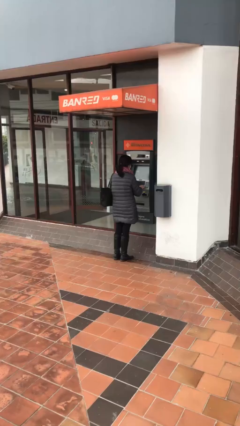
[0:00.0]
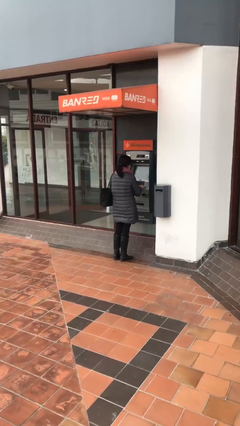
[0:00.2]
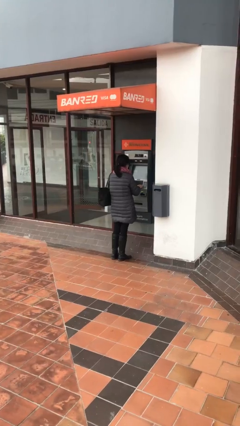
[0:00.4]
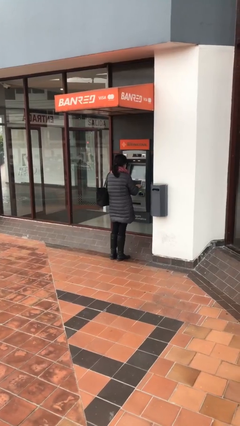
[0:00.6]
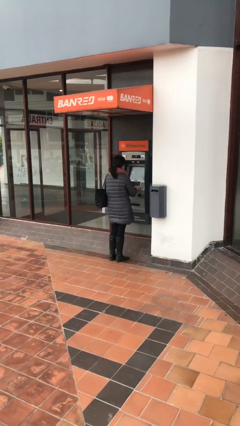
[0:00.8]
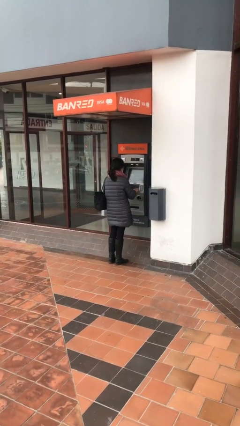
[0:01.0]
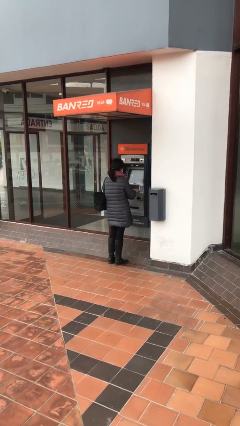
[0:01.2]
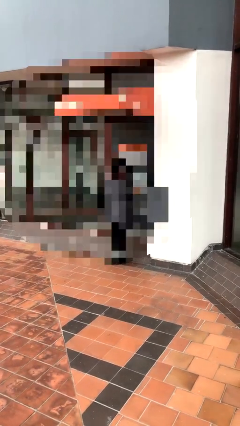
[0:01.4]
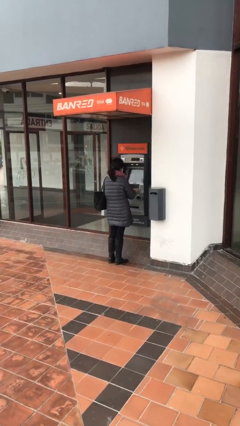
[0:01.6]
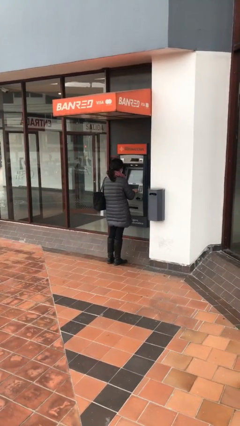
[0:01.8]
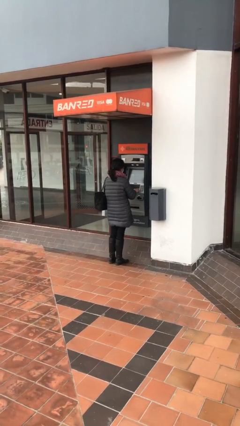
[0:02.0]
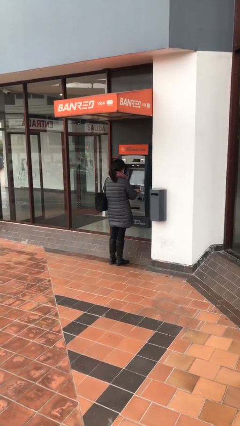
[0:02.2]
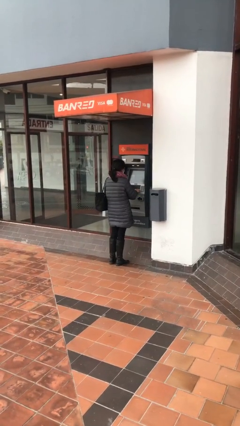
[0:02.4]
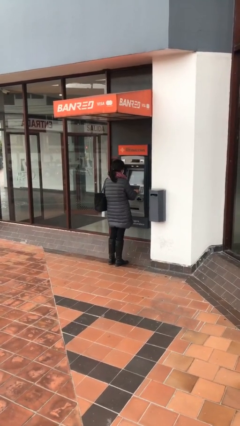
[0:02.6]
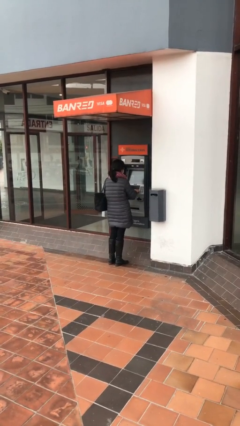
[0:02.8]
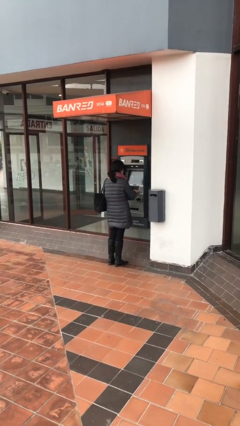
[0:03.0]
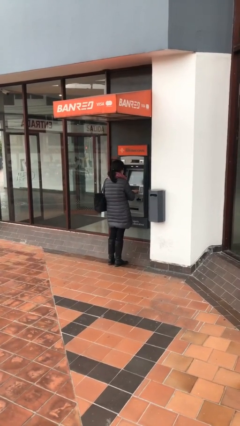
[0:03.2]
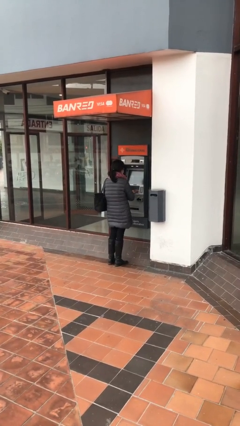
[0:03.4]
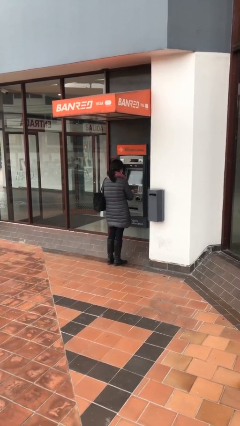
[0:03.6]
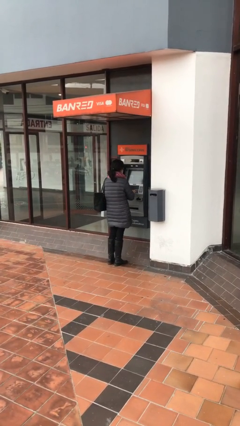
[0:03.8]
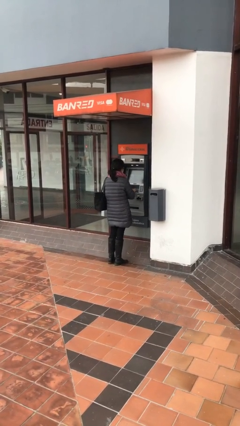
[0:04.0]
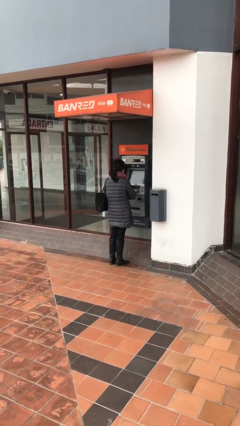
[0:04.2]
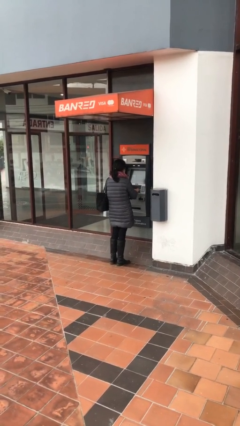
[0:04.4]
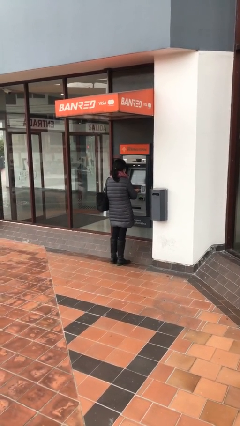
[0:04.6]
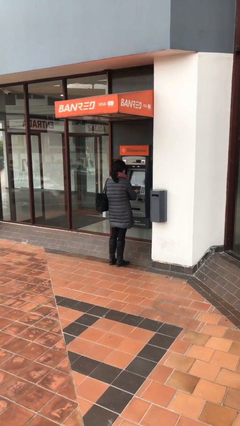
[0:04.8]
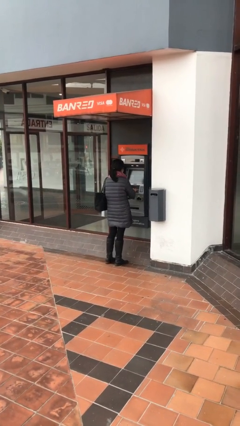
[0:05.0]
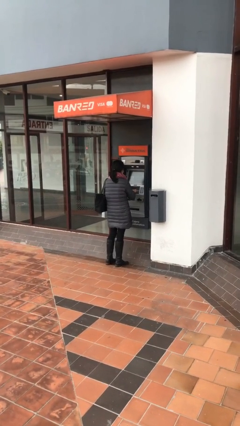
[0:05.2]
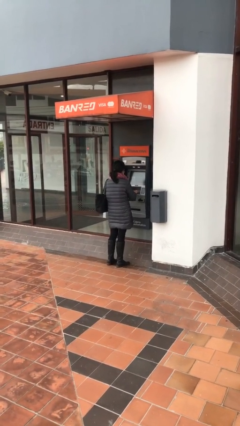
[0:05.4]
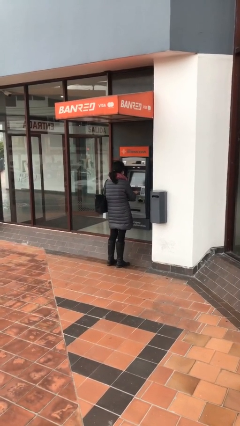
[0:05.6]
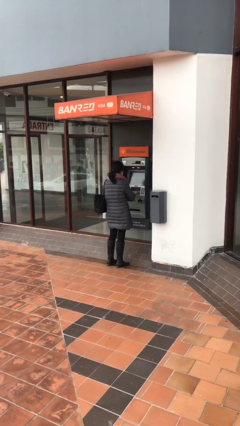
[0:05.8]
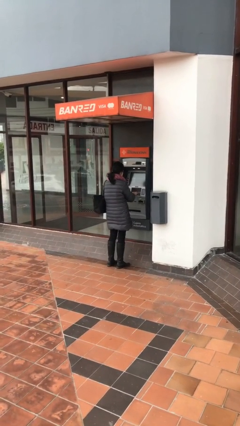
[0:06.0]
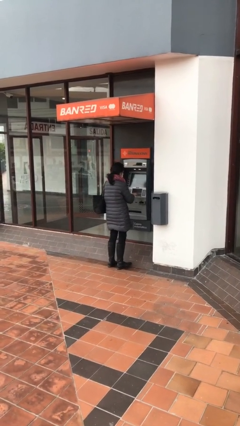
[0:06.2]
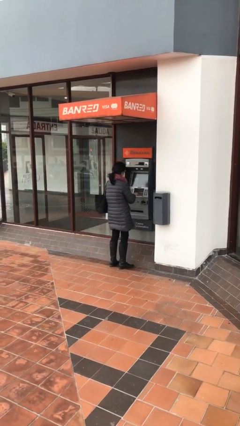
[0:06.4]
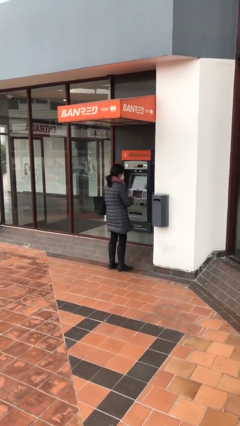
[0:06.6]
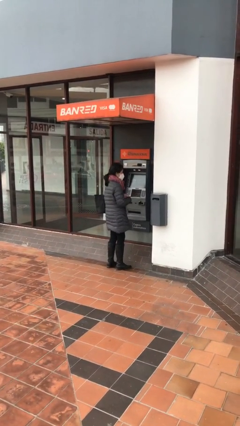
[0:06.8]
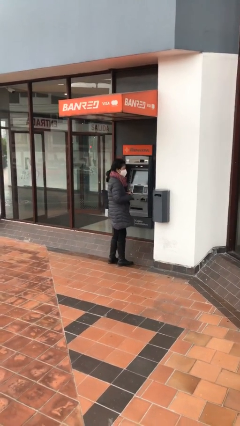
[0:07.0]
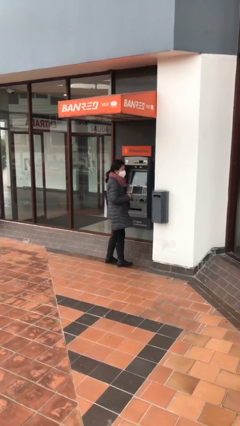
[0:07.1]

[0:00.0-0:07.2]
person purchases from machine

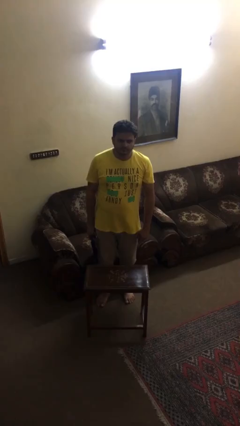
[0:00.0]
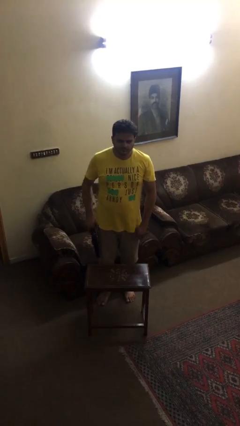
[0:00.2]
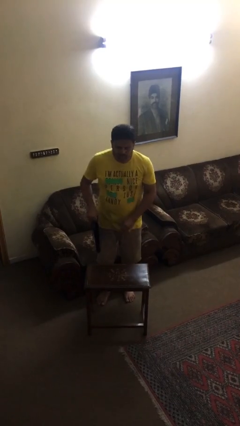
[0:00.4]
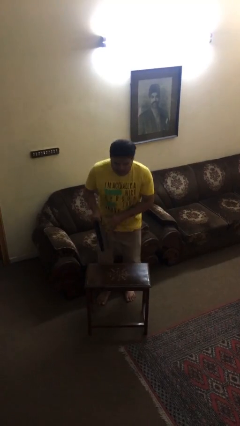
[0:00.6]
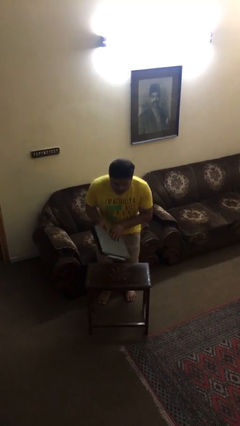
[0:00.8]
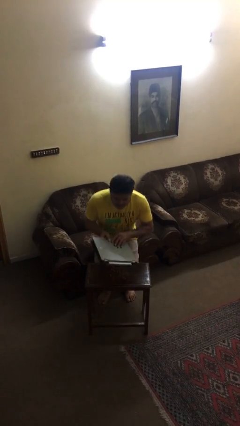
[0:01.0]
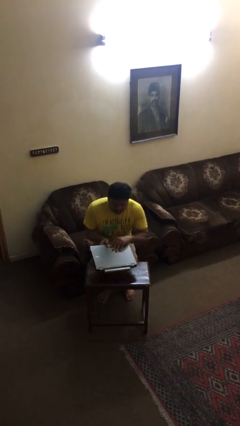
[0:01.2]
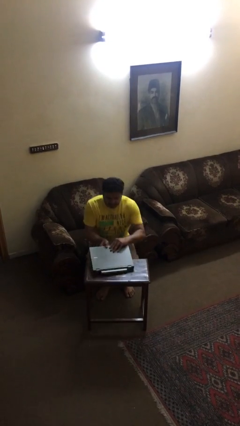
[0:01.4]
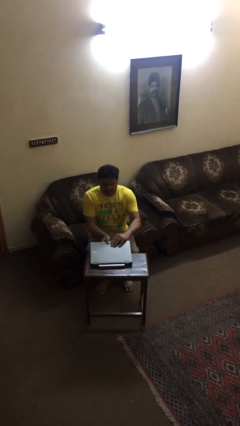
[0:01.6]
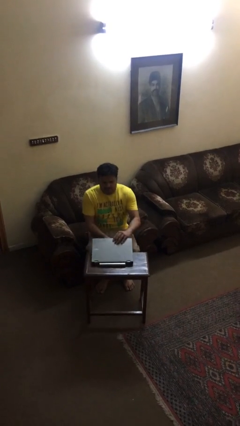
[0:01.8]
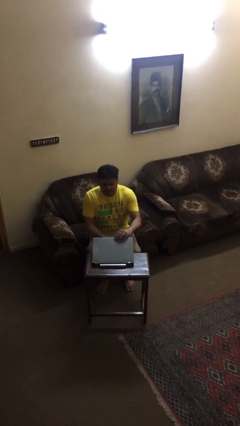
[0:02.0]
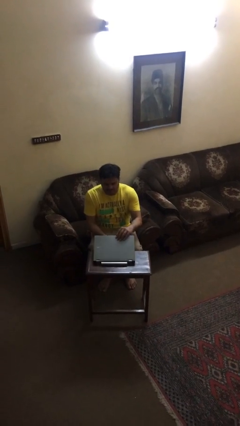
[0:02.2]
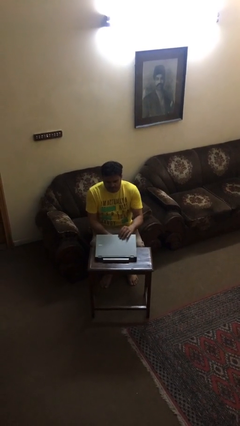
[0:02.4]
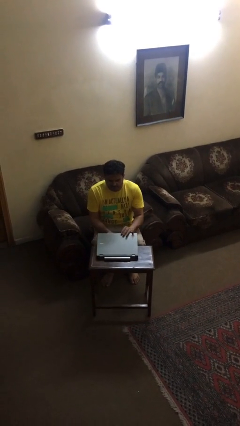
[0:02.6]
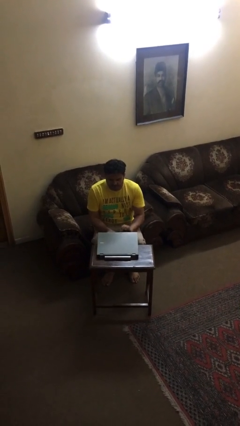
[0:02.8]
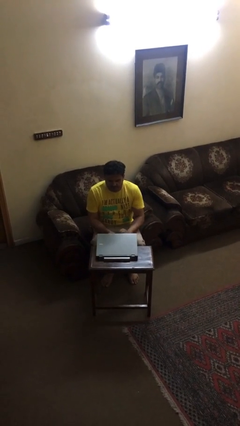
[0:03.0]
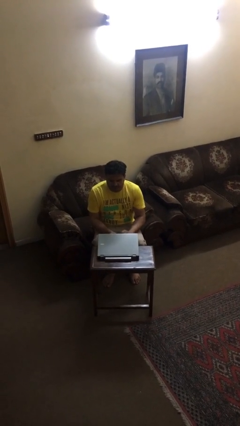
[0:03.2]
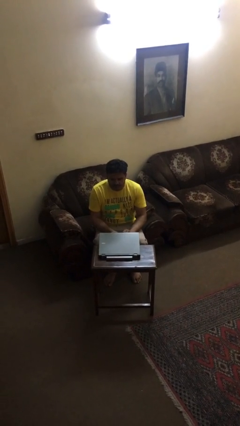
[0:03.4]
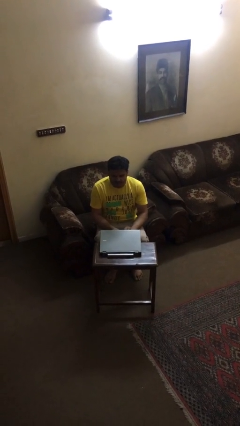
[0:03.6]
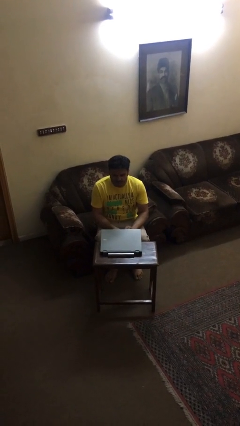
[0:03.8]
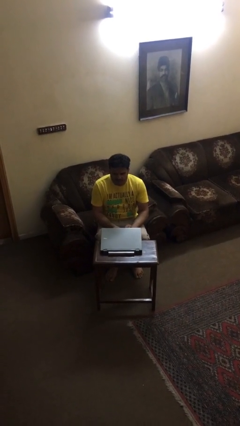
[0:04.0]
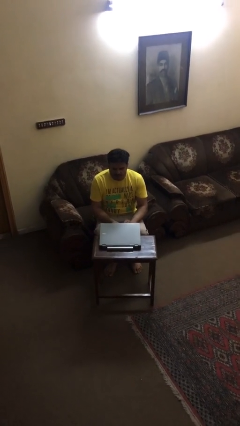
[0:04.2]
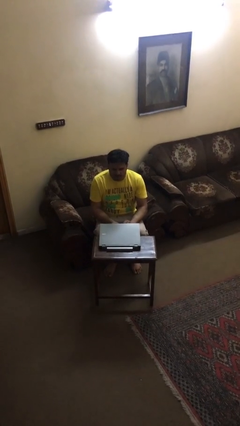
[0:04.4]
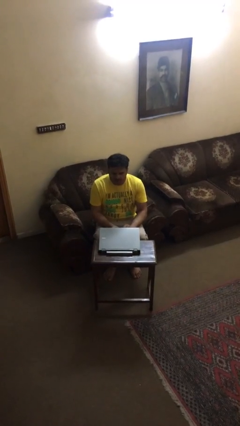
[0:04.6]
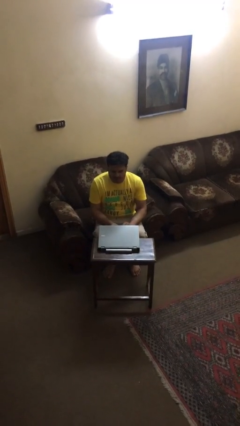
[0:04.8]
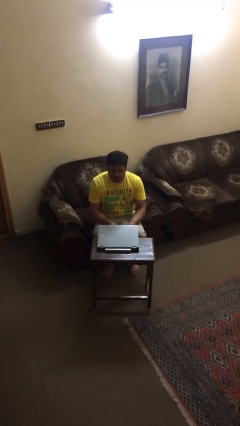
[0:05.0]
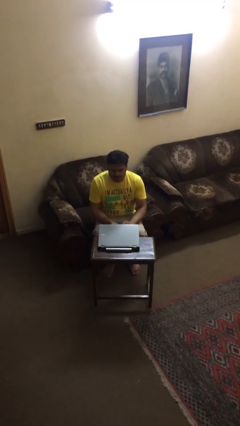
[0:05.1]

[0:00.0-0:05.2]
person sits down

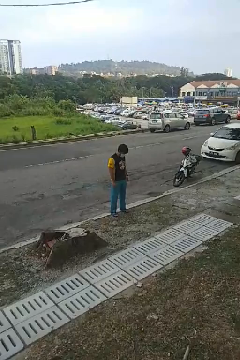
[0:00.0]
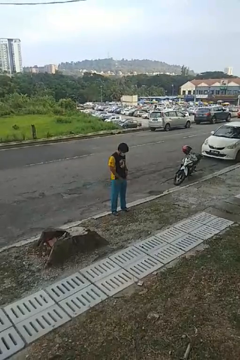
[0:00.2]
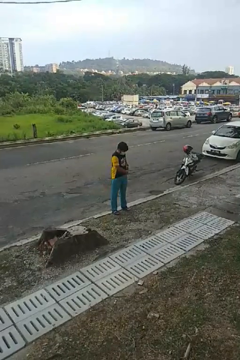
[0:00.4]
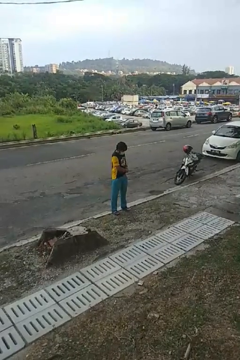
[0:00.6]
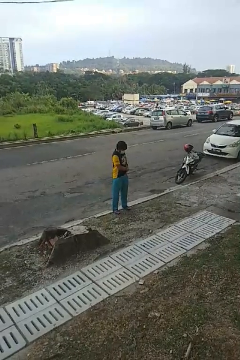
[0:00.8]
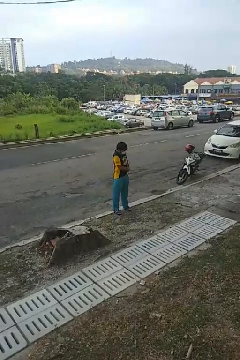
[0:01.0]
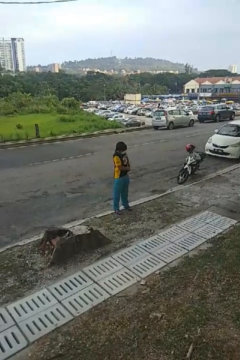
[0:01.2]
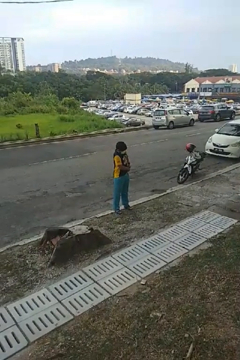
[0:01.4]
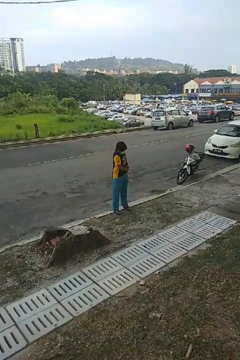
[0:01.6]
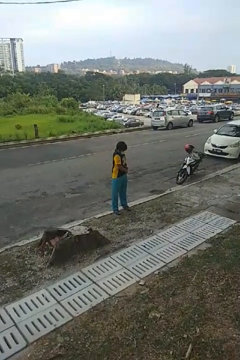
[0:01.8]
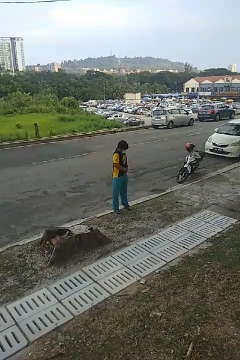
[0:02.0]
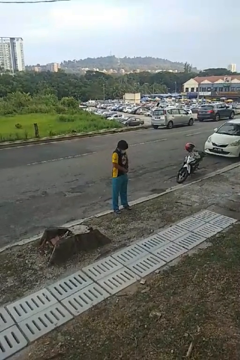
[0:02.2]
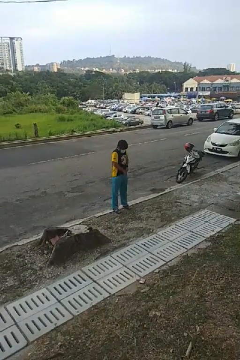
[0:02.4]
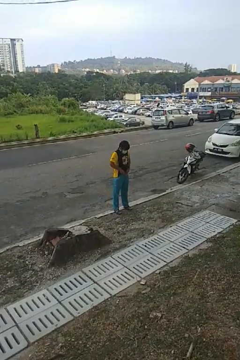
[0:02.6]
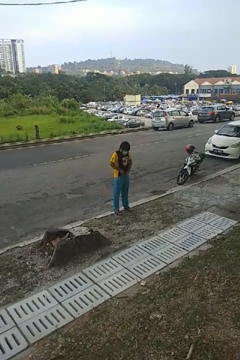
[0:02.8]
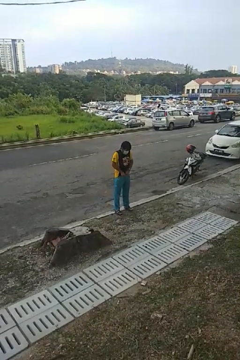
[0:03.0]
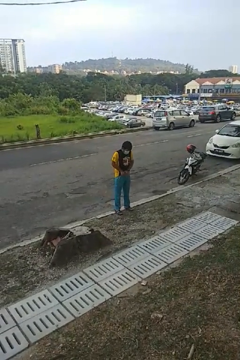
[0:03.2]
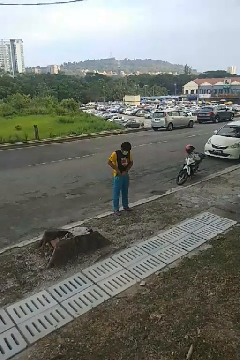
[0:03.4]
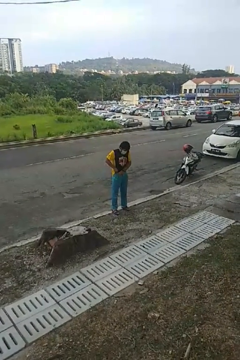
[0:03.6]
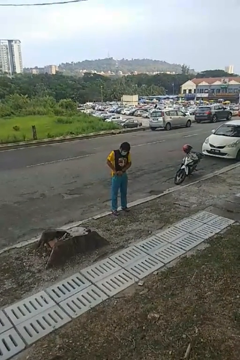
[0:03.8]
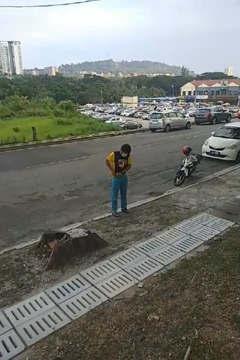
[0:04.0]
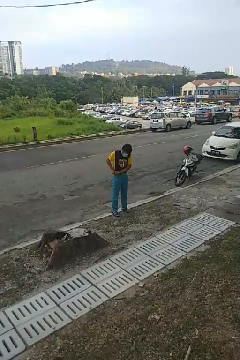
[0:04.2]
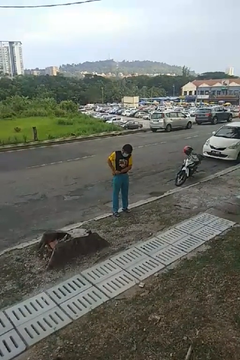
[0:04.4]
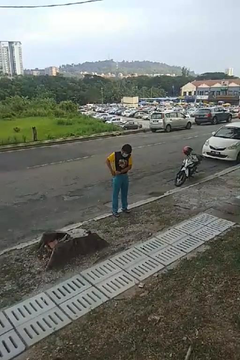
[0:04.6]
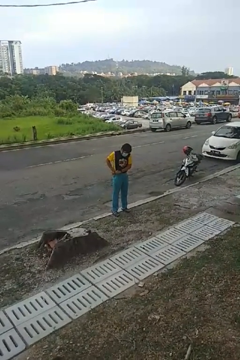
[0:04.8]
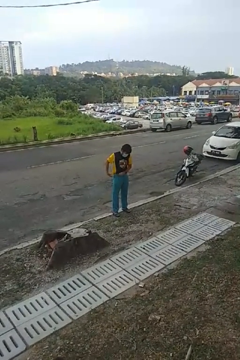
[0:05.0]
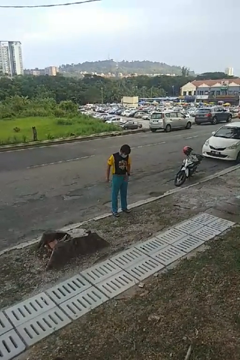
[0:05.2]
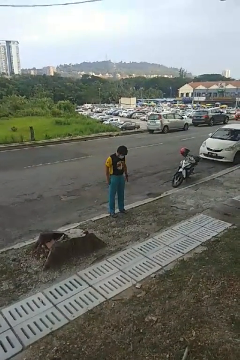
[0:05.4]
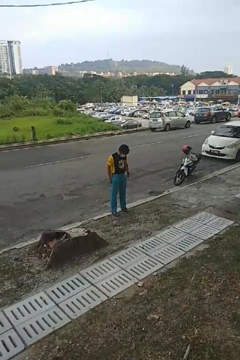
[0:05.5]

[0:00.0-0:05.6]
person tucks in shirt

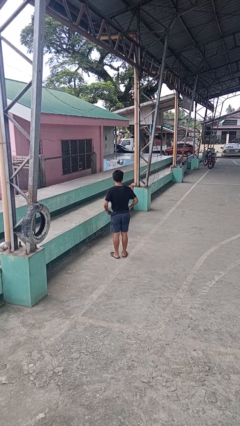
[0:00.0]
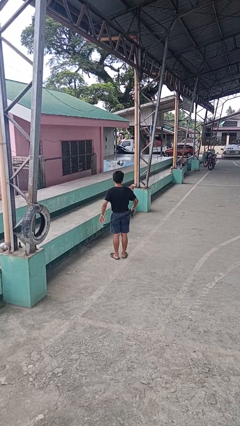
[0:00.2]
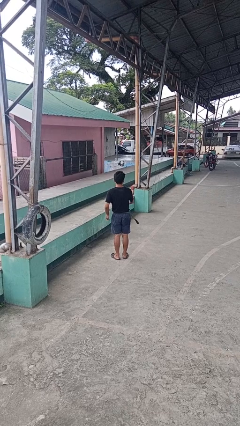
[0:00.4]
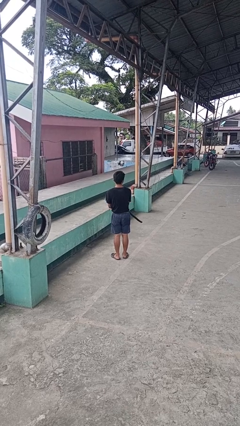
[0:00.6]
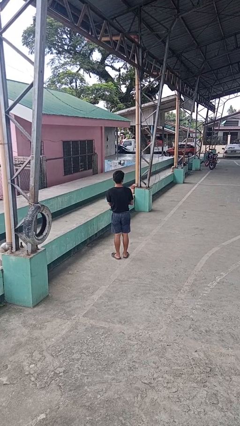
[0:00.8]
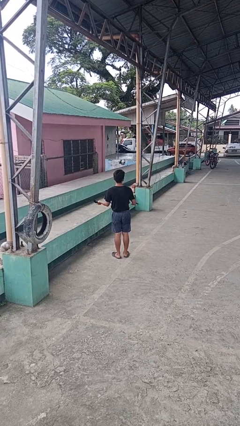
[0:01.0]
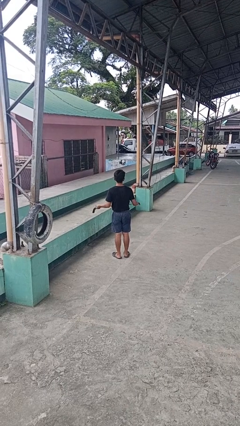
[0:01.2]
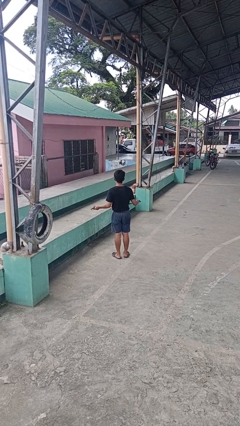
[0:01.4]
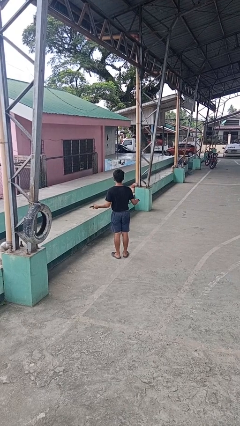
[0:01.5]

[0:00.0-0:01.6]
person takes off belt
